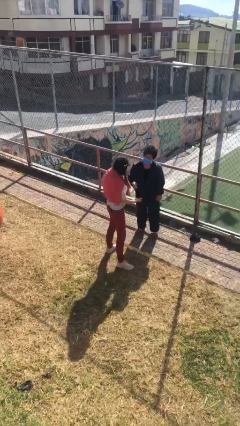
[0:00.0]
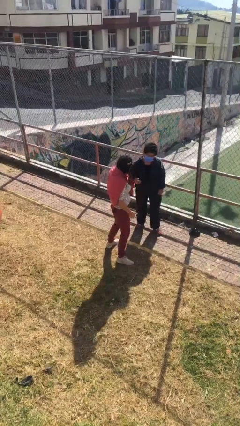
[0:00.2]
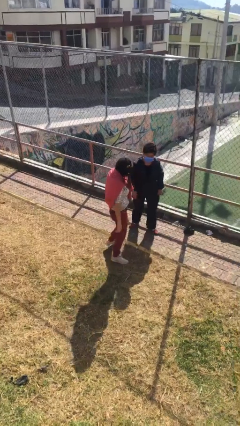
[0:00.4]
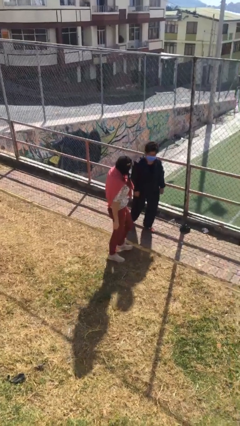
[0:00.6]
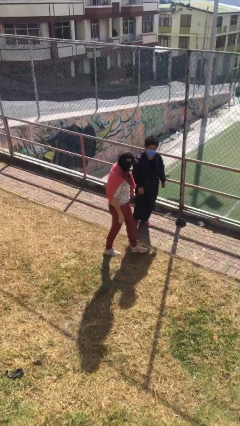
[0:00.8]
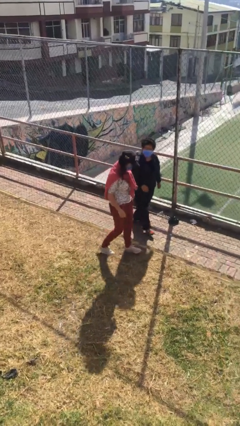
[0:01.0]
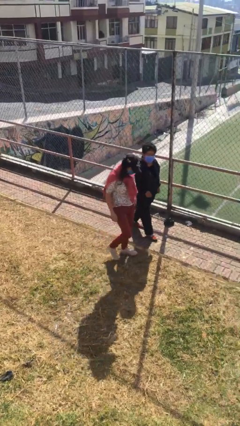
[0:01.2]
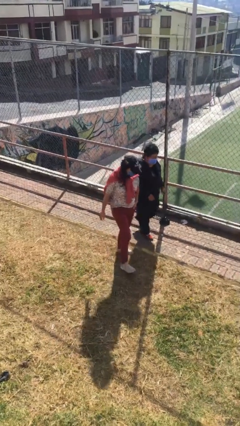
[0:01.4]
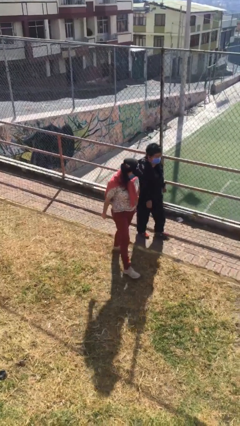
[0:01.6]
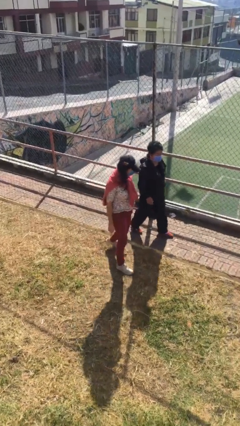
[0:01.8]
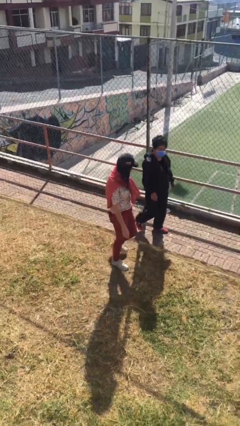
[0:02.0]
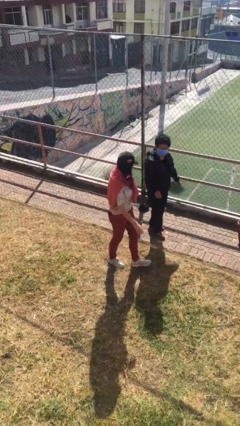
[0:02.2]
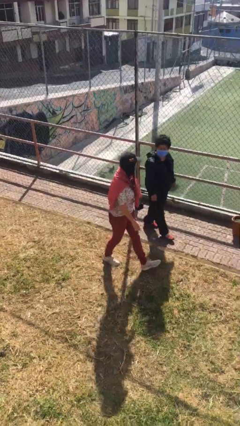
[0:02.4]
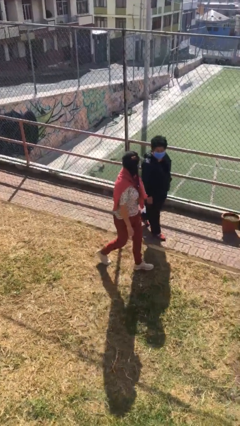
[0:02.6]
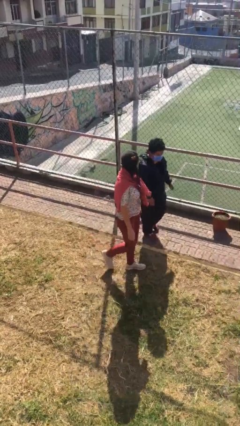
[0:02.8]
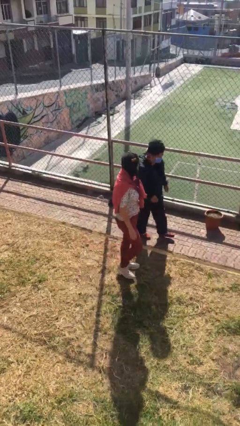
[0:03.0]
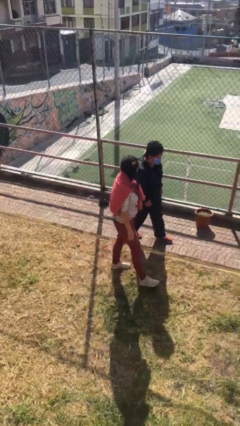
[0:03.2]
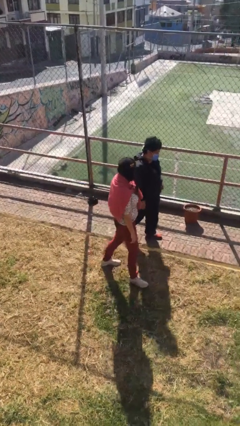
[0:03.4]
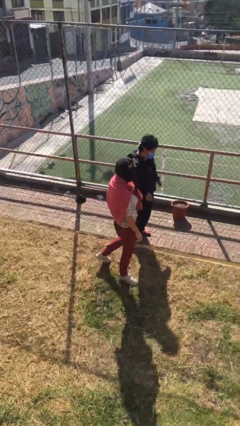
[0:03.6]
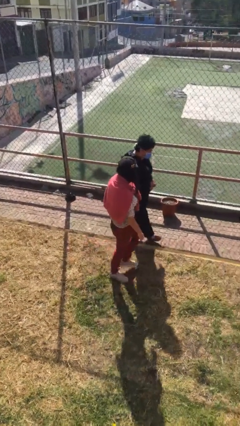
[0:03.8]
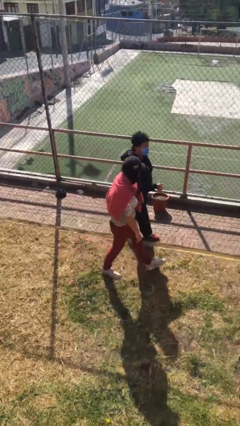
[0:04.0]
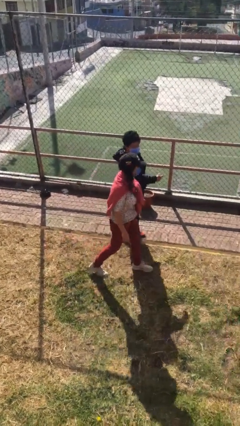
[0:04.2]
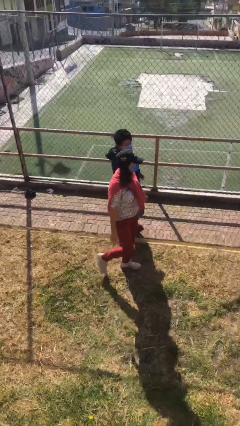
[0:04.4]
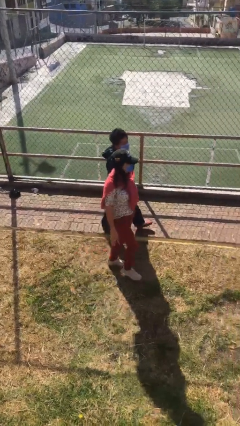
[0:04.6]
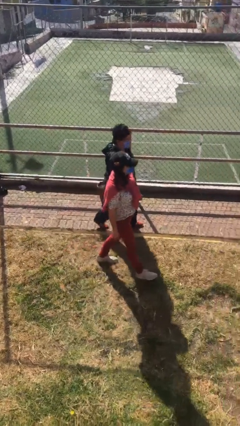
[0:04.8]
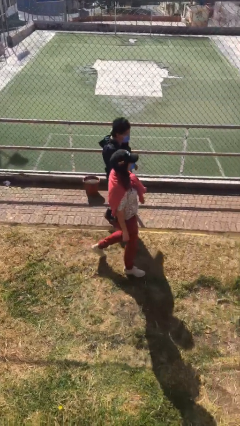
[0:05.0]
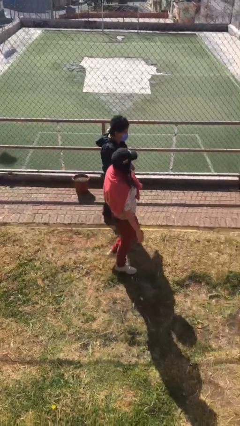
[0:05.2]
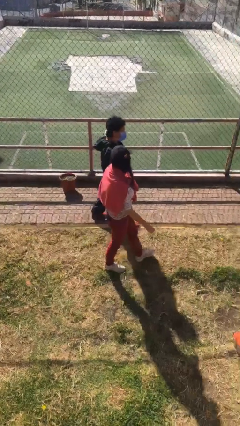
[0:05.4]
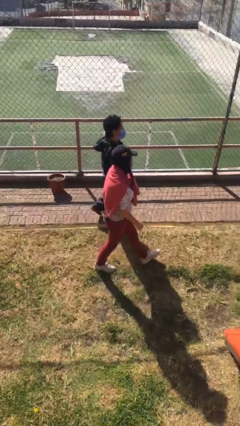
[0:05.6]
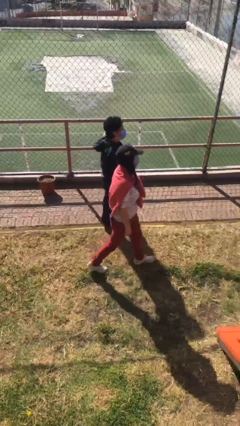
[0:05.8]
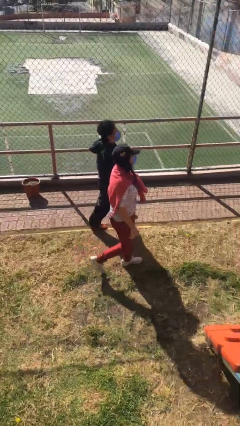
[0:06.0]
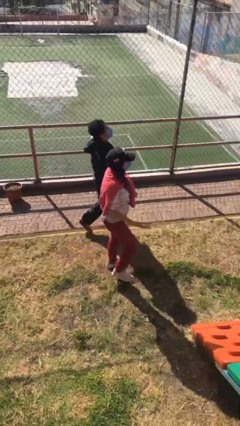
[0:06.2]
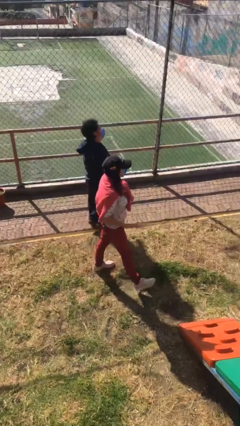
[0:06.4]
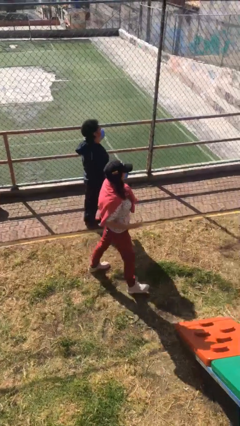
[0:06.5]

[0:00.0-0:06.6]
person talks to person

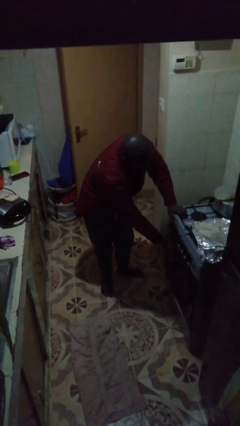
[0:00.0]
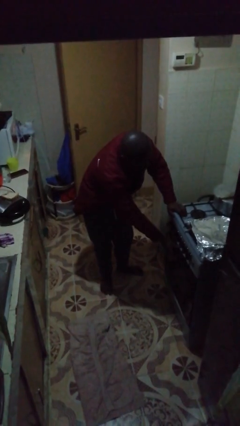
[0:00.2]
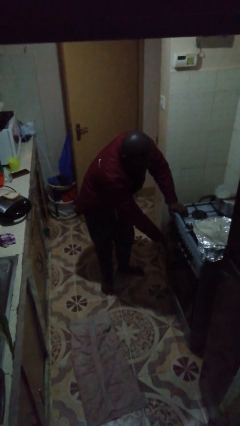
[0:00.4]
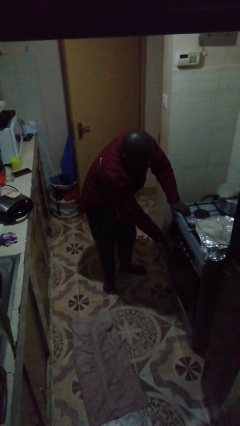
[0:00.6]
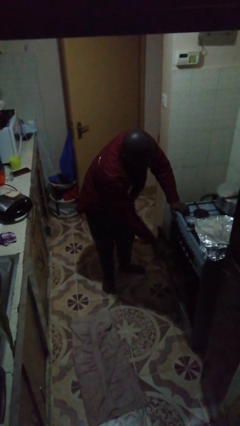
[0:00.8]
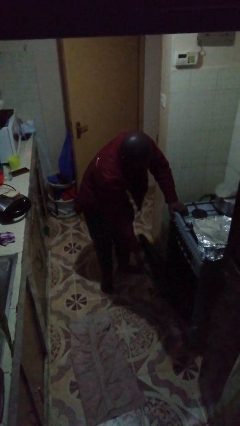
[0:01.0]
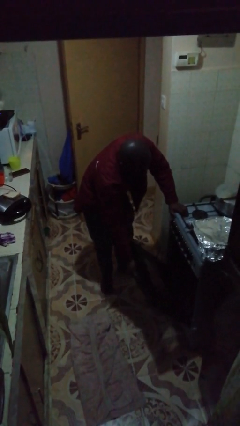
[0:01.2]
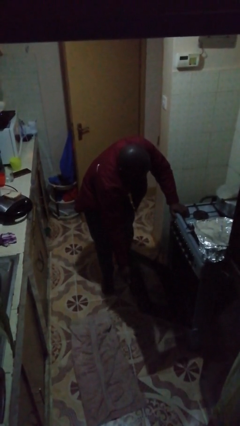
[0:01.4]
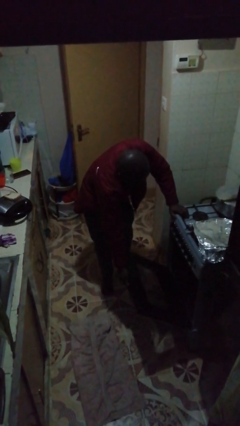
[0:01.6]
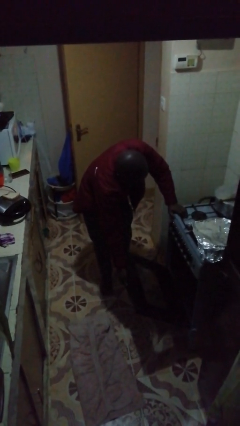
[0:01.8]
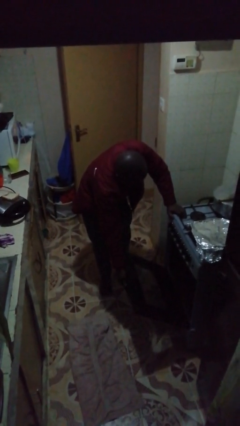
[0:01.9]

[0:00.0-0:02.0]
person opens oven door

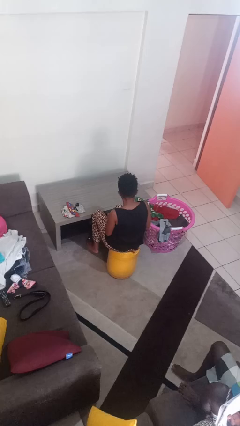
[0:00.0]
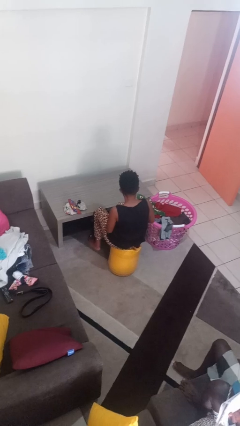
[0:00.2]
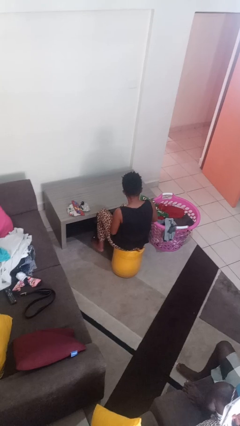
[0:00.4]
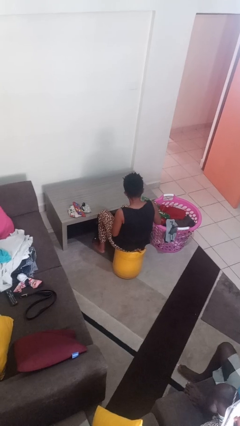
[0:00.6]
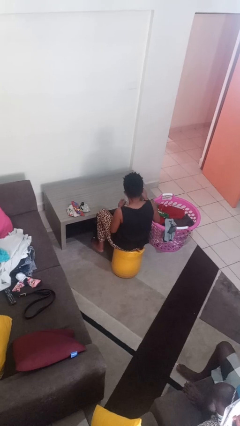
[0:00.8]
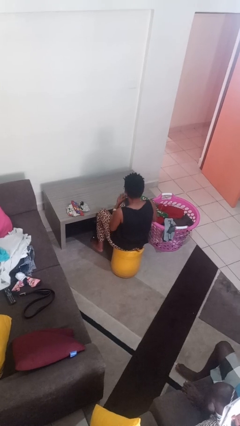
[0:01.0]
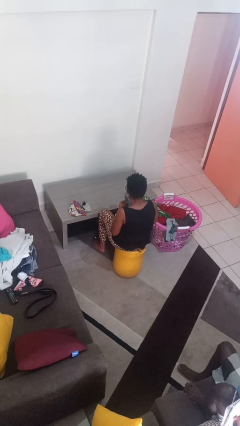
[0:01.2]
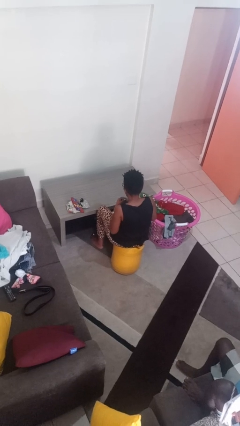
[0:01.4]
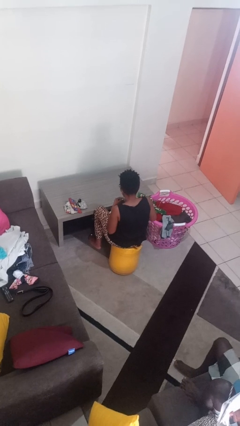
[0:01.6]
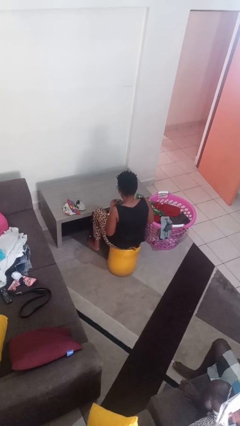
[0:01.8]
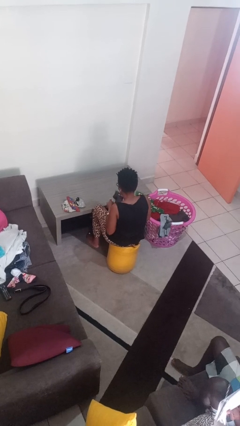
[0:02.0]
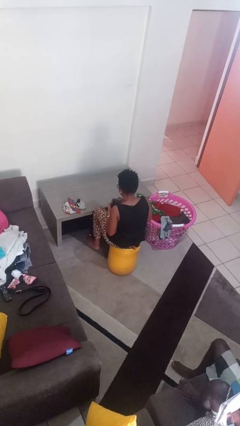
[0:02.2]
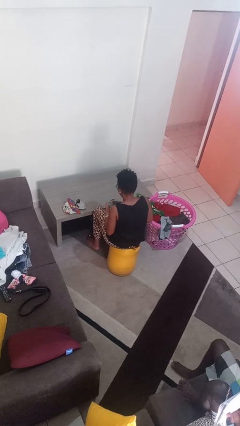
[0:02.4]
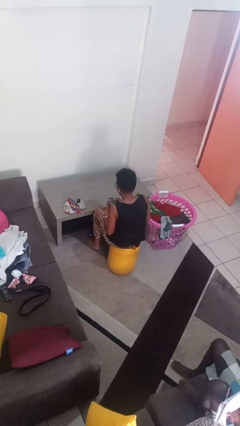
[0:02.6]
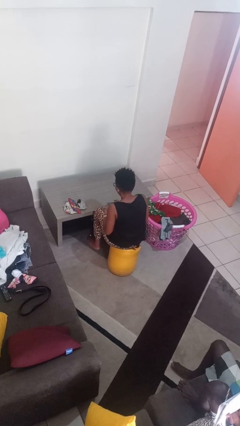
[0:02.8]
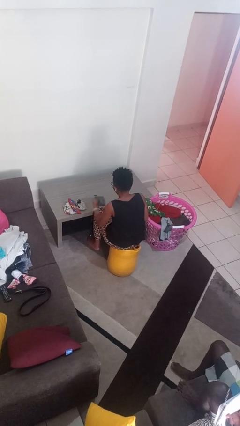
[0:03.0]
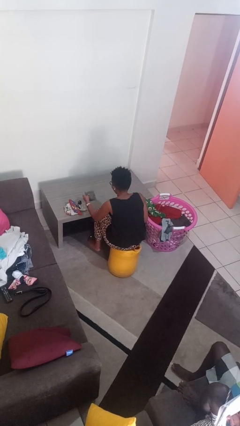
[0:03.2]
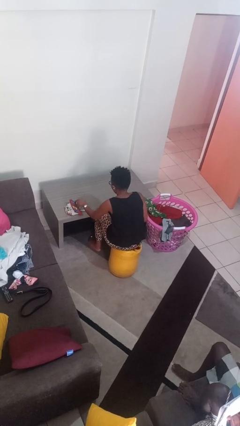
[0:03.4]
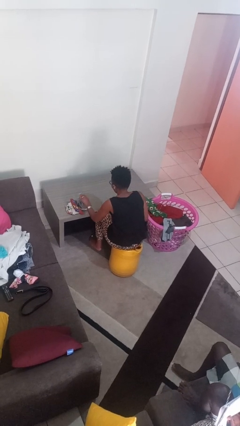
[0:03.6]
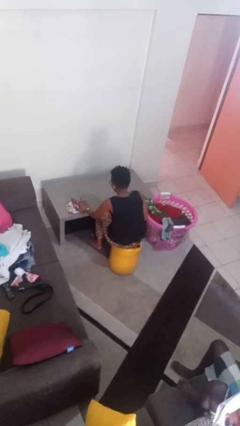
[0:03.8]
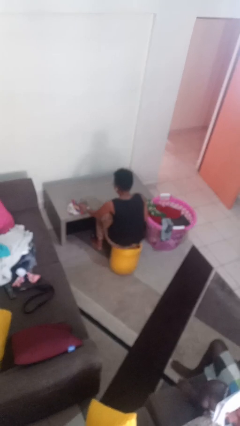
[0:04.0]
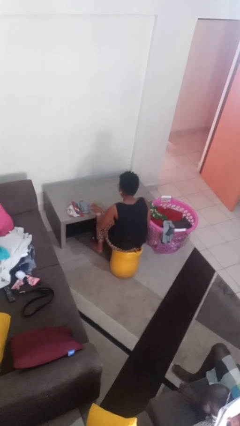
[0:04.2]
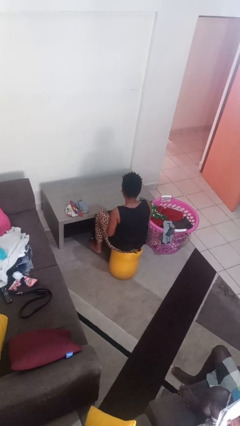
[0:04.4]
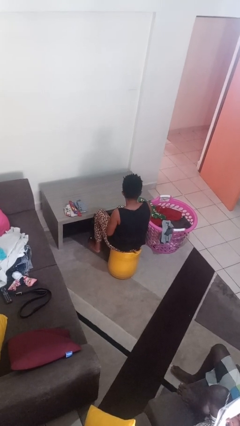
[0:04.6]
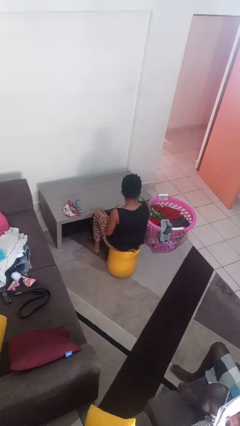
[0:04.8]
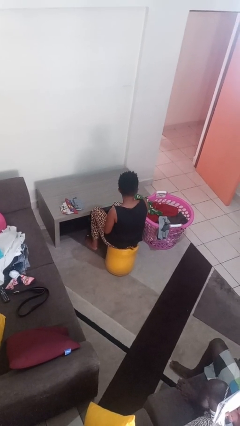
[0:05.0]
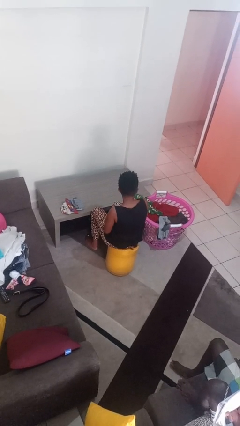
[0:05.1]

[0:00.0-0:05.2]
person folds socks

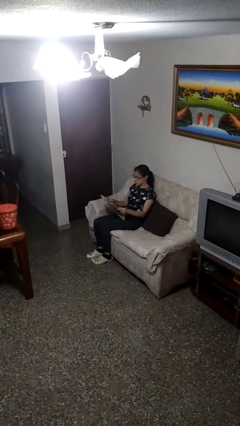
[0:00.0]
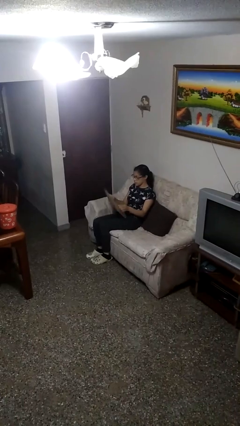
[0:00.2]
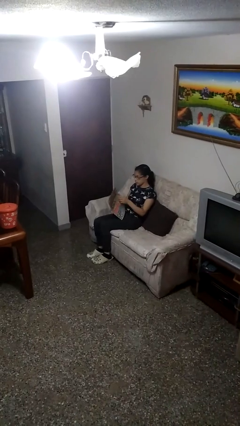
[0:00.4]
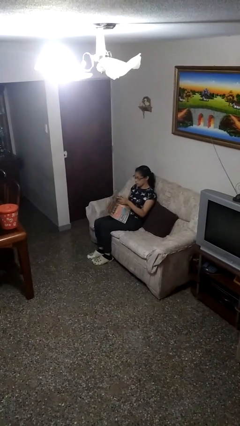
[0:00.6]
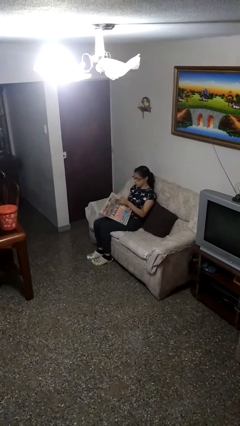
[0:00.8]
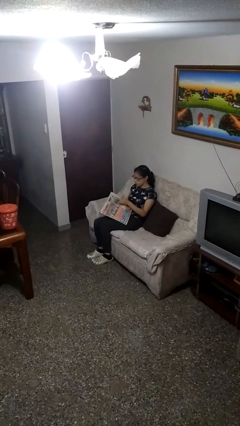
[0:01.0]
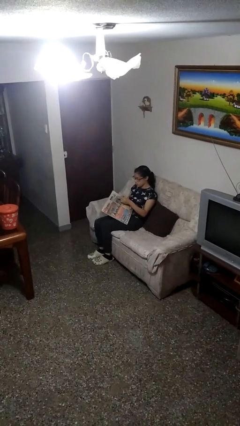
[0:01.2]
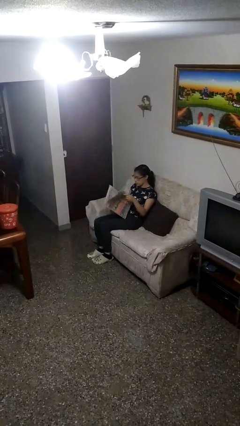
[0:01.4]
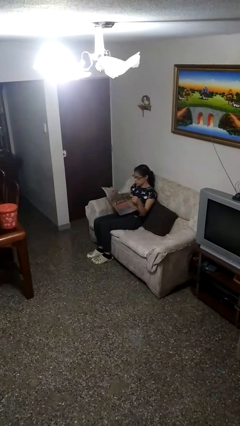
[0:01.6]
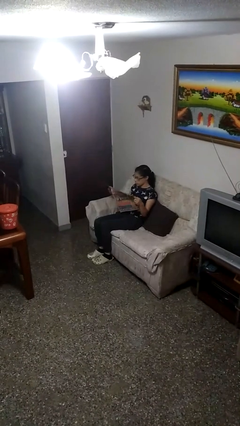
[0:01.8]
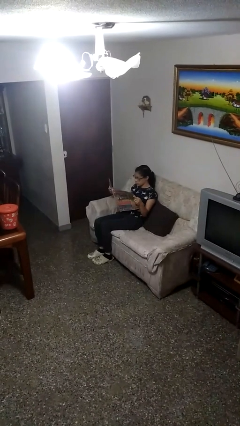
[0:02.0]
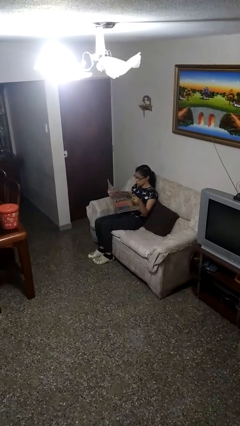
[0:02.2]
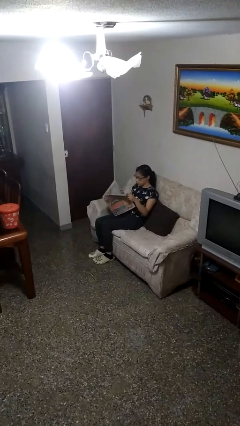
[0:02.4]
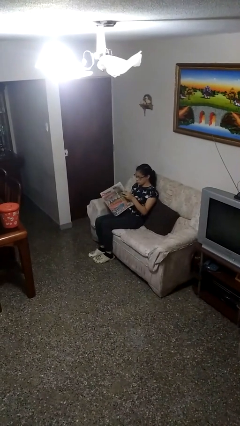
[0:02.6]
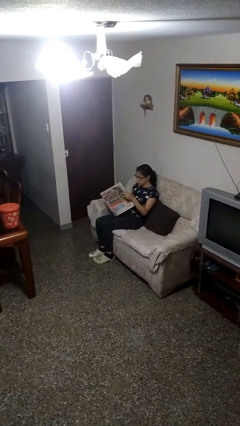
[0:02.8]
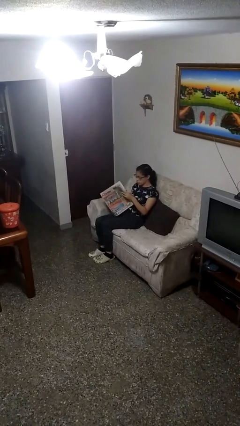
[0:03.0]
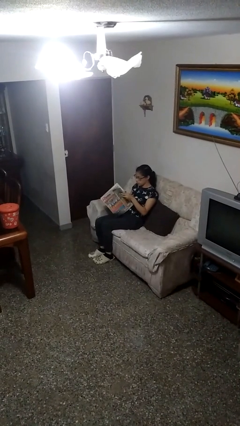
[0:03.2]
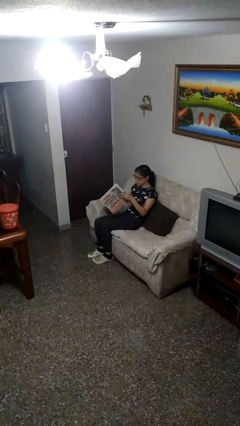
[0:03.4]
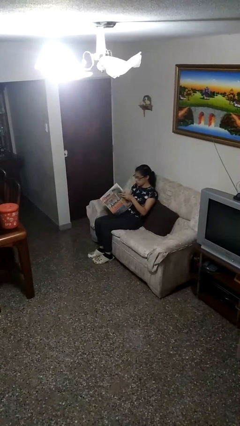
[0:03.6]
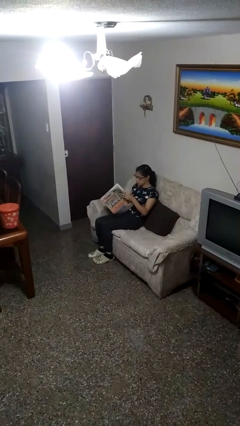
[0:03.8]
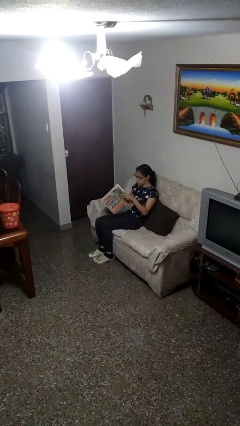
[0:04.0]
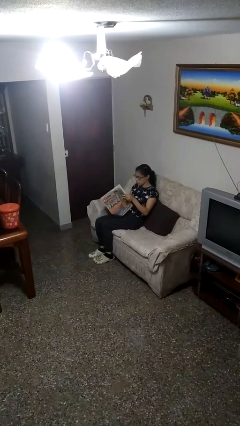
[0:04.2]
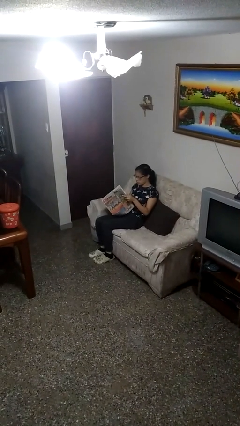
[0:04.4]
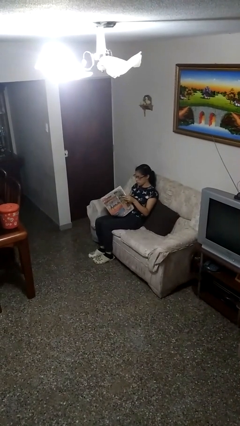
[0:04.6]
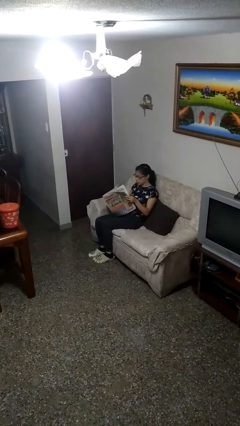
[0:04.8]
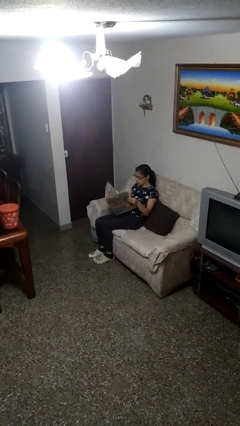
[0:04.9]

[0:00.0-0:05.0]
person reads newspaper
